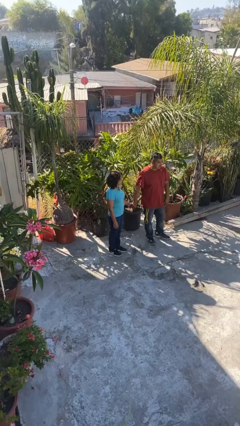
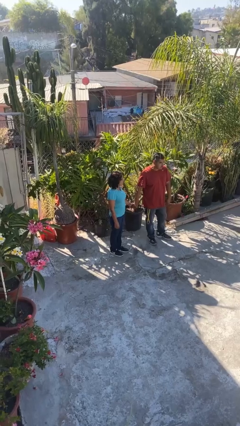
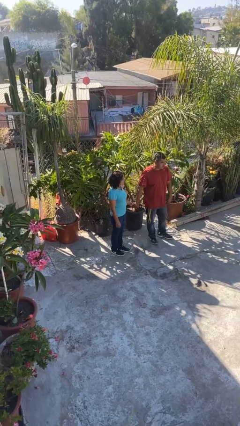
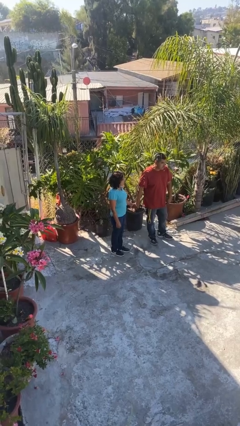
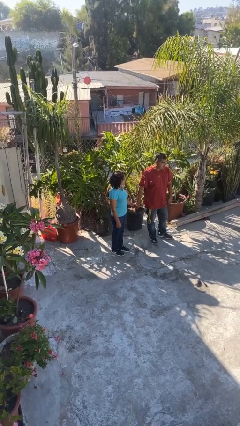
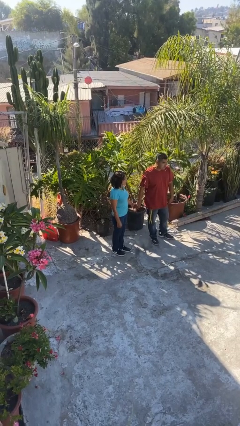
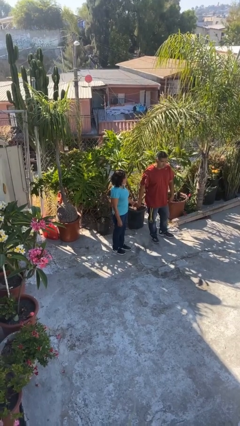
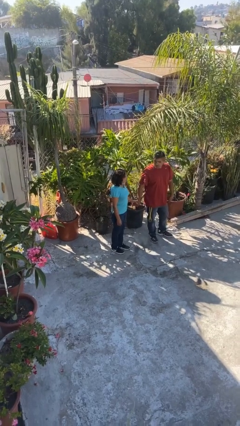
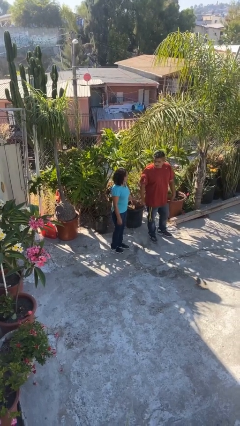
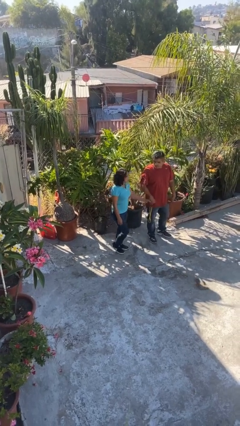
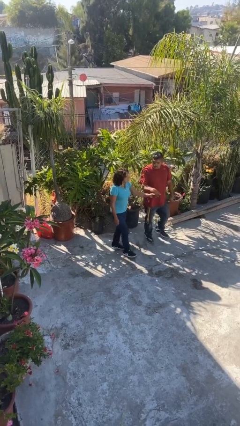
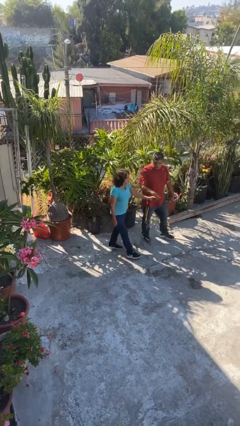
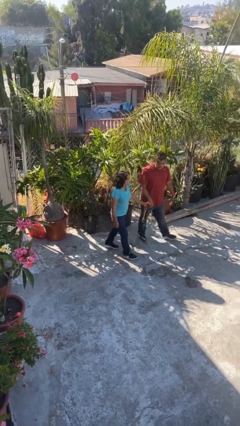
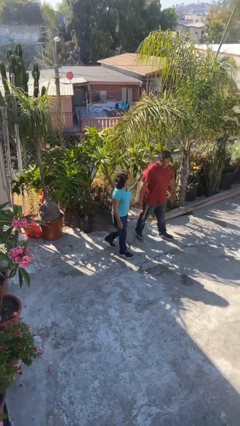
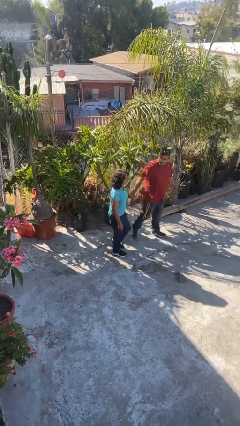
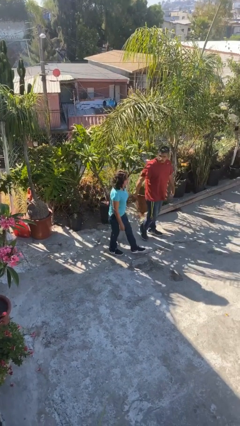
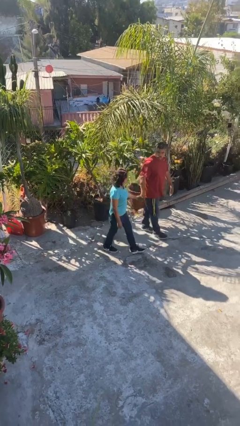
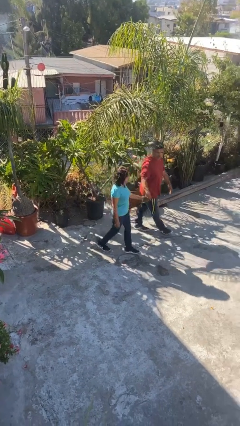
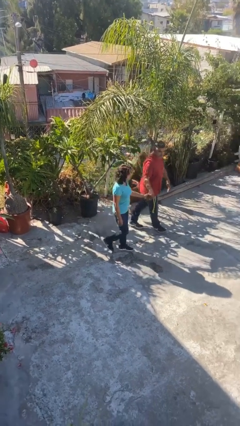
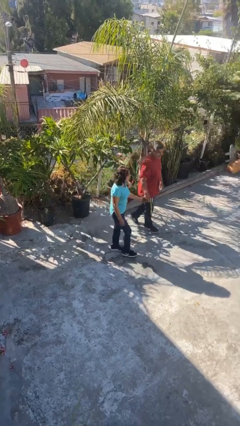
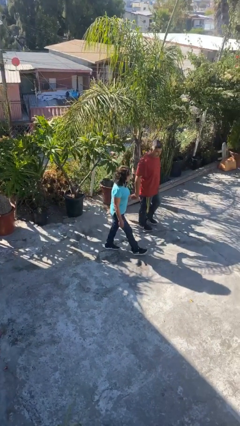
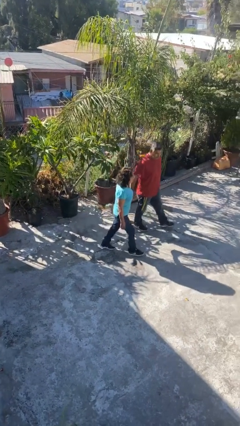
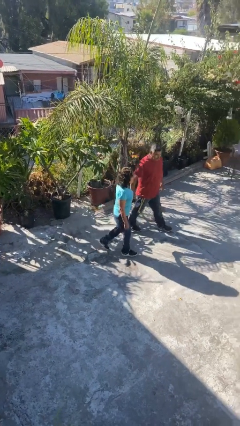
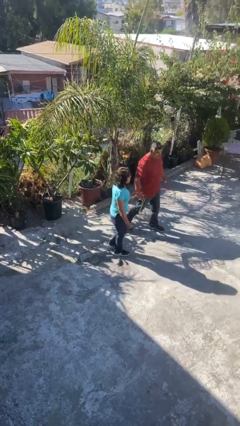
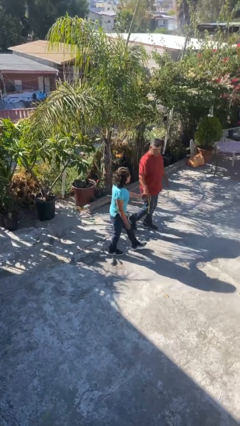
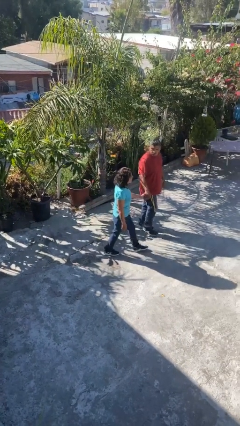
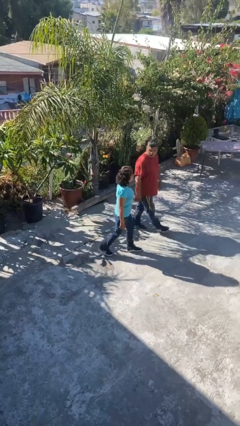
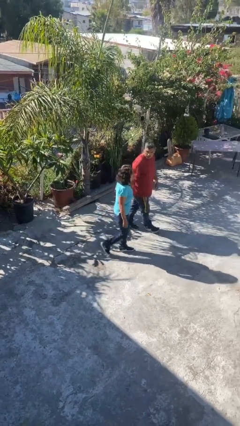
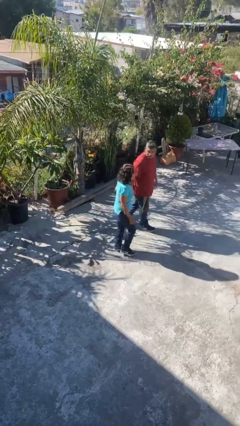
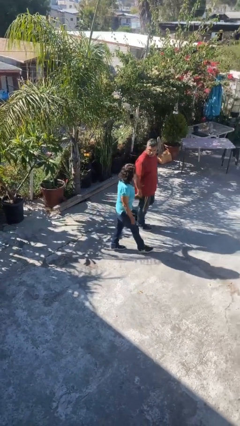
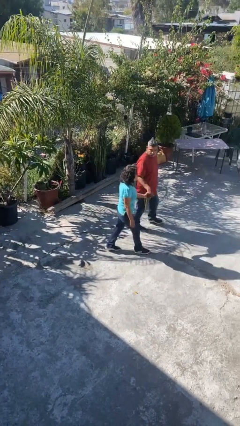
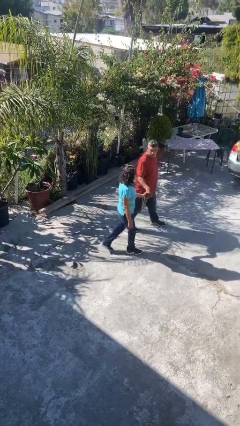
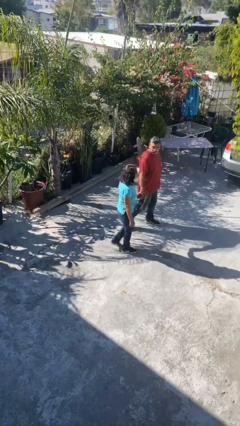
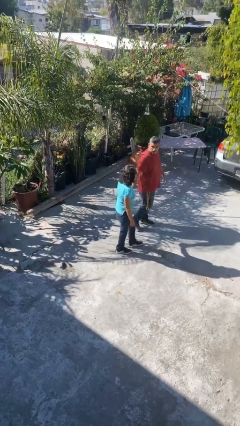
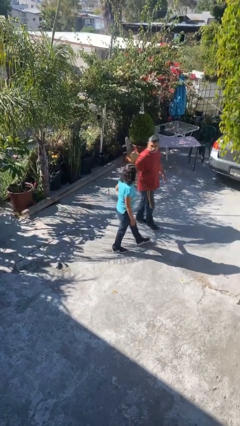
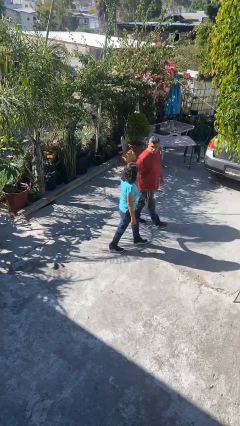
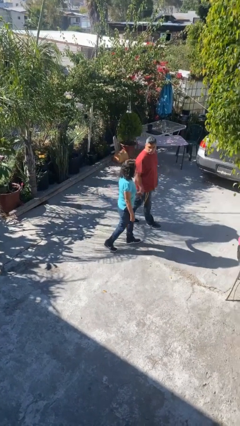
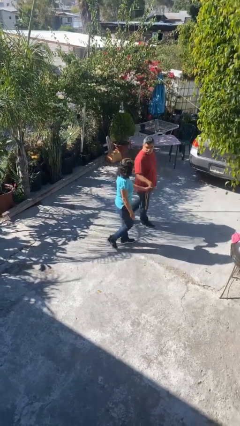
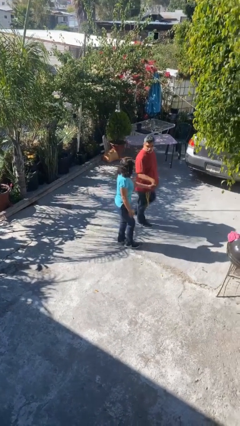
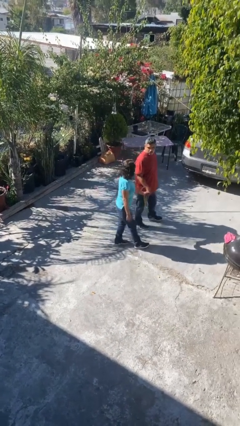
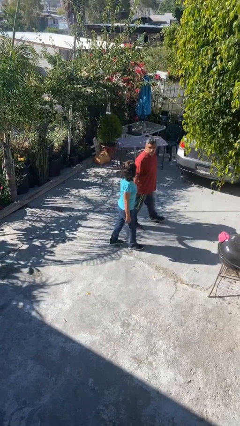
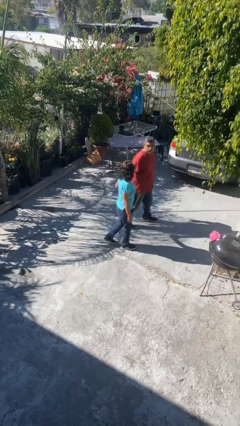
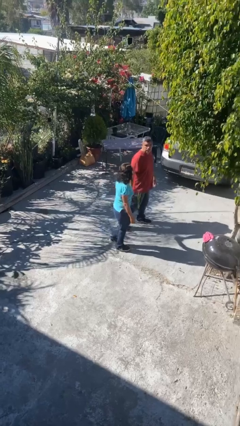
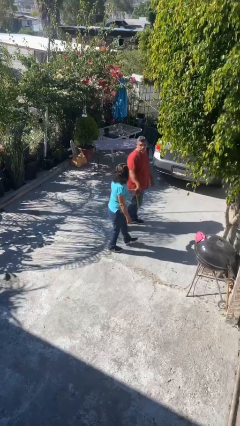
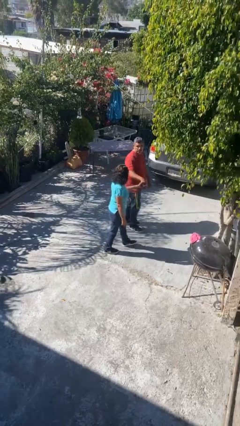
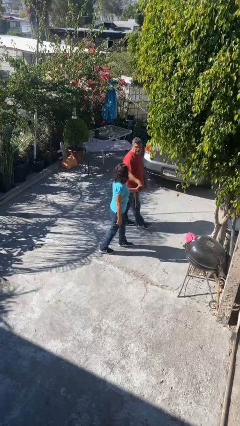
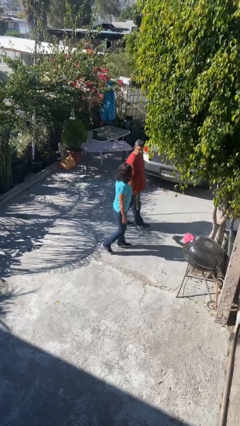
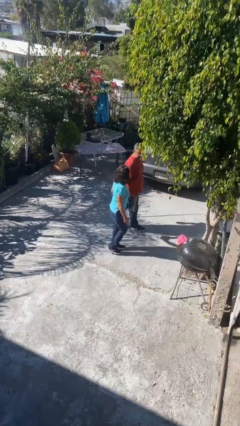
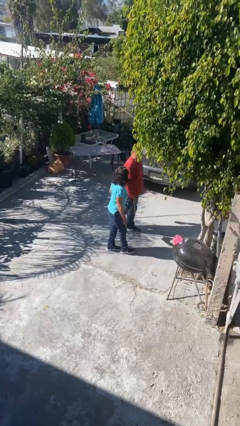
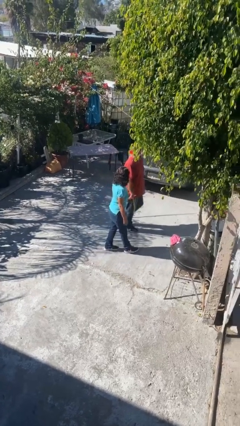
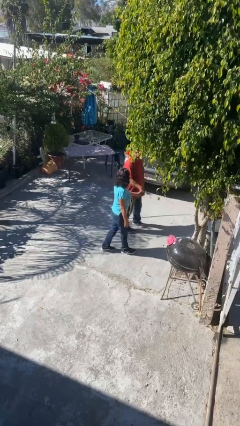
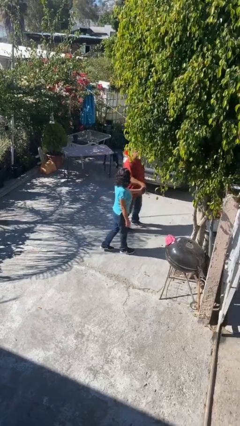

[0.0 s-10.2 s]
person holds hand

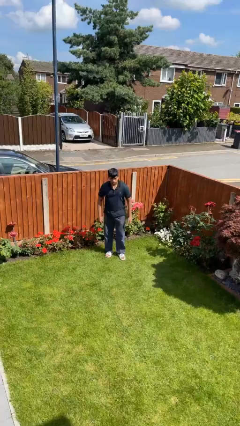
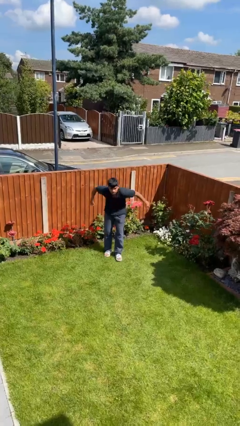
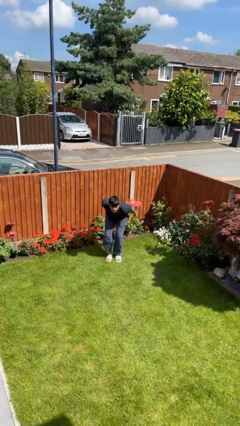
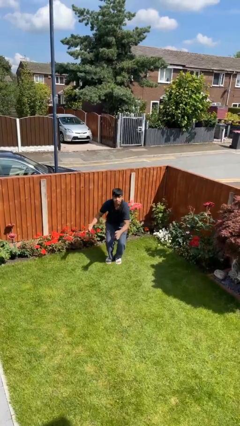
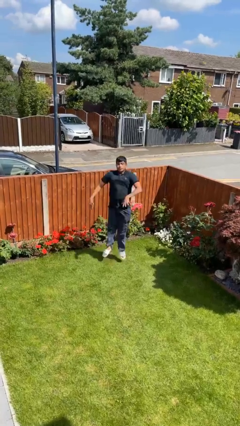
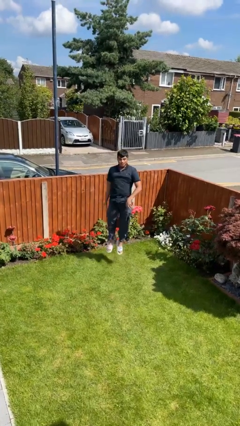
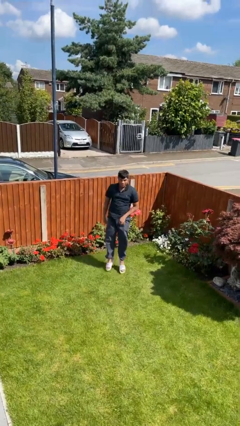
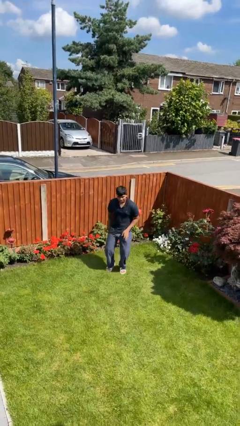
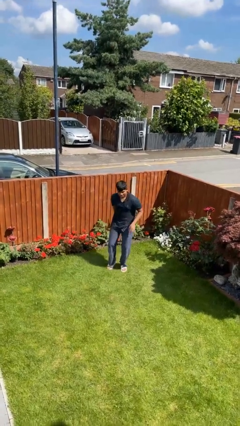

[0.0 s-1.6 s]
person jumps

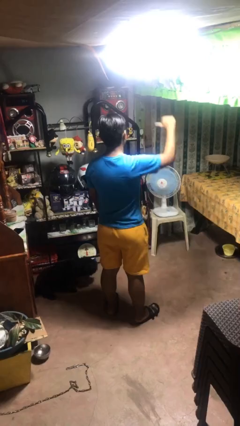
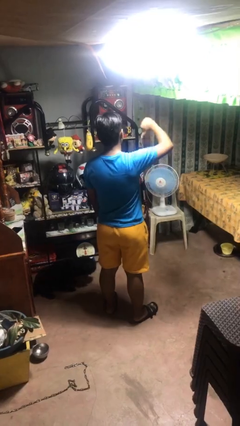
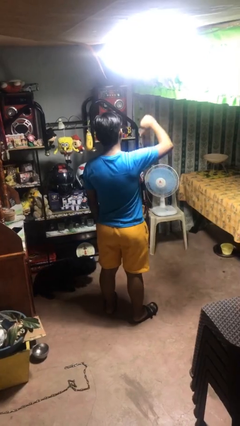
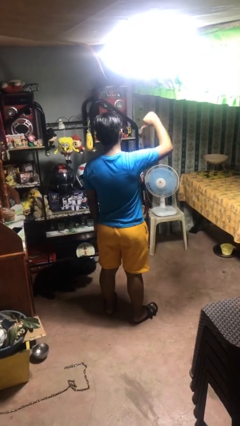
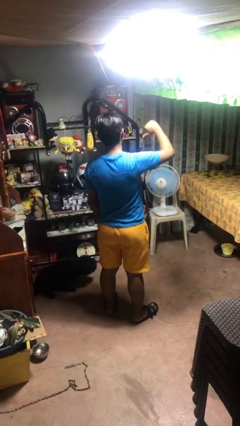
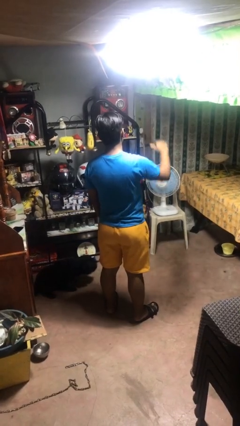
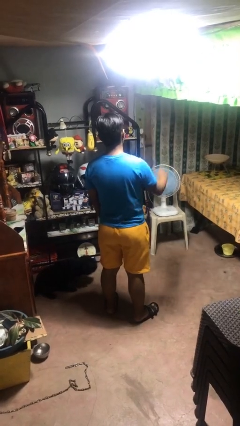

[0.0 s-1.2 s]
person gestures thumbs down

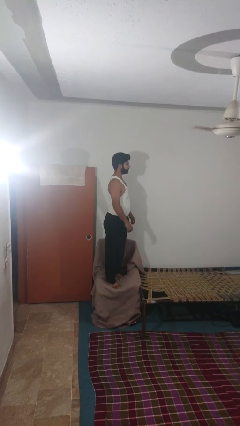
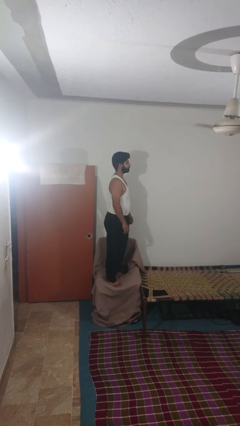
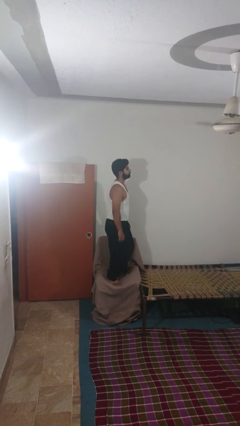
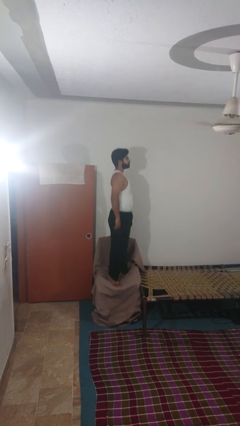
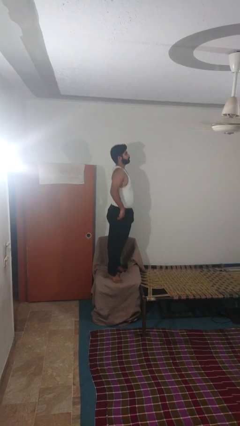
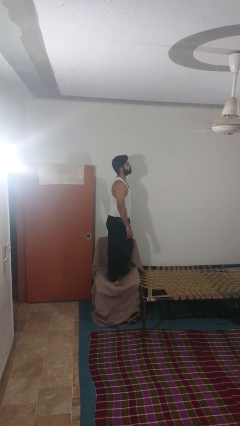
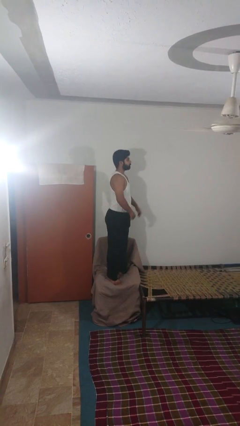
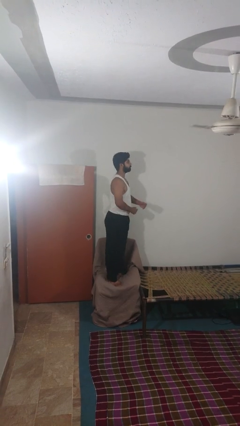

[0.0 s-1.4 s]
person jumps on couch

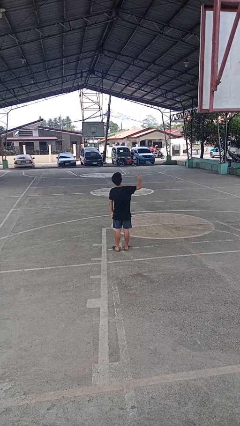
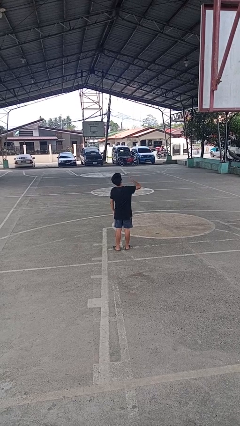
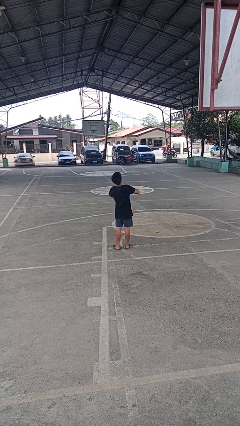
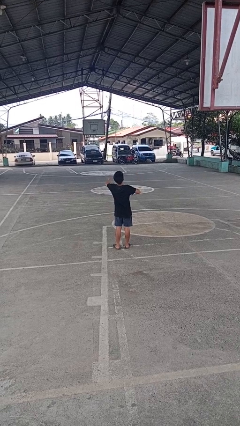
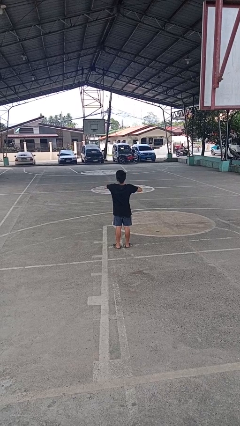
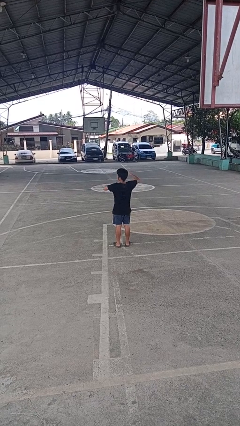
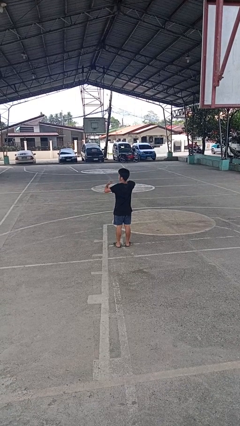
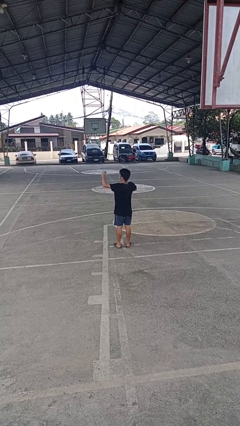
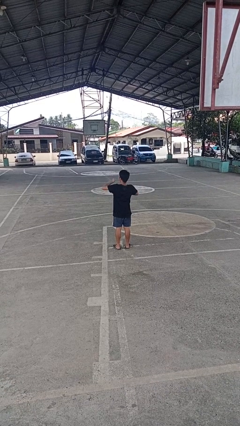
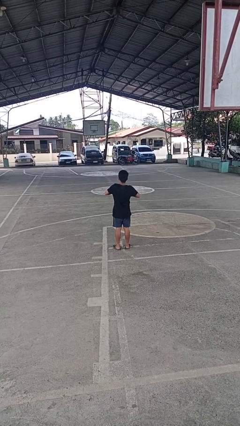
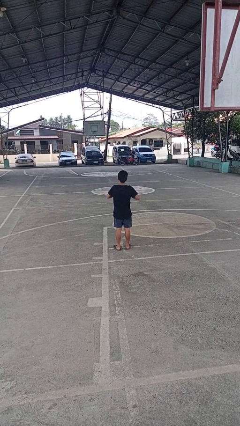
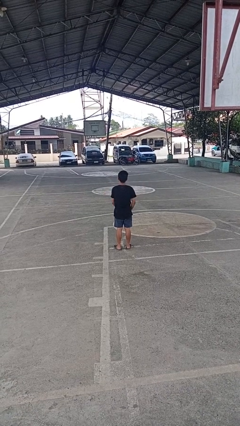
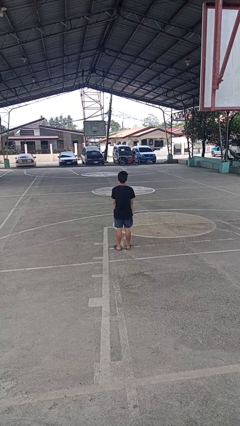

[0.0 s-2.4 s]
person drums on chest

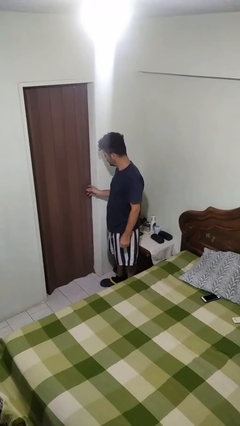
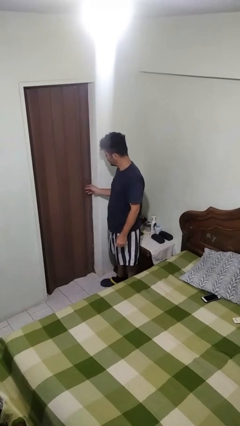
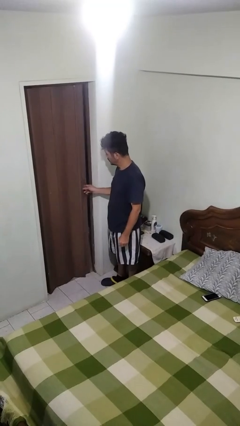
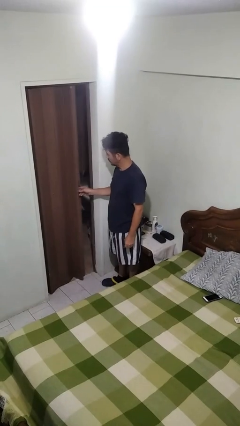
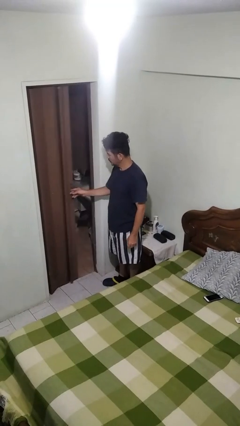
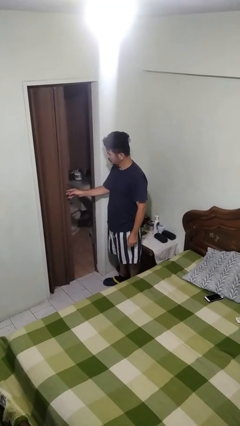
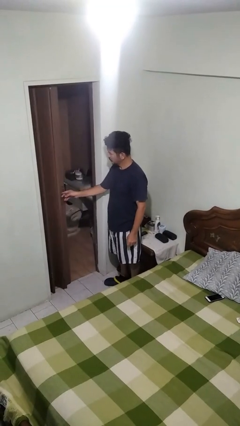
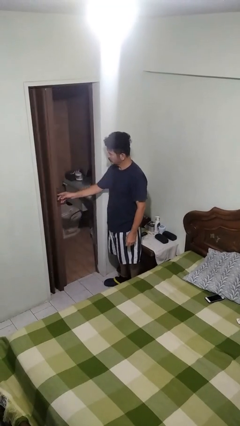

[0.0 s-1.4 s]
person opens sliding door
